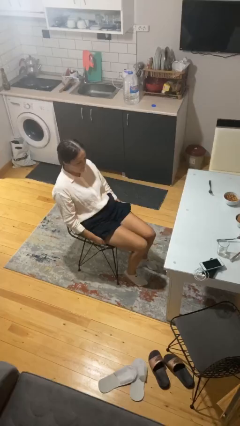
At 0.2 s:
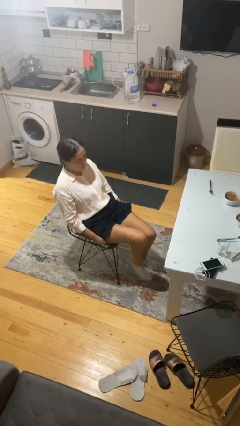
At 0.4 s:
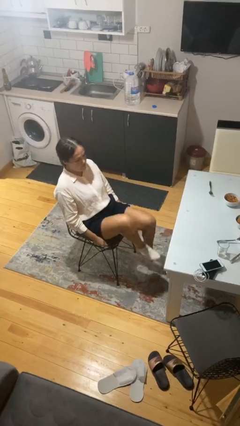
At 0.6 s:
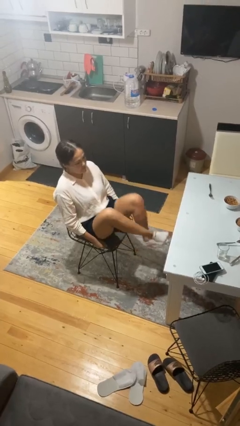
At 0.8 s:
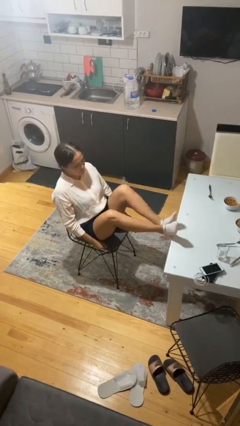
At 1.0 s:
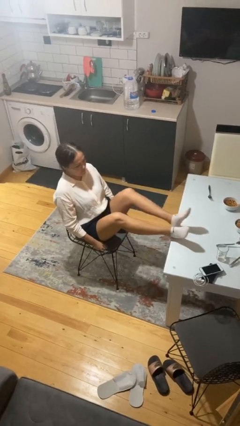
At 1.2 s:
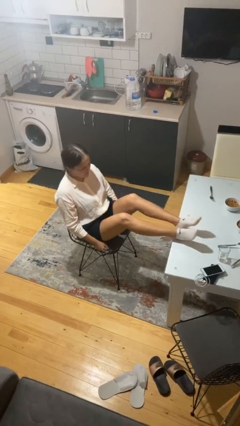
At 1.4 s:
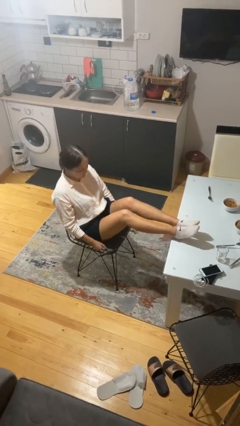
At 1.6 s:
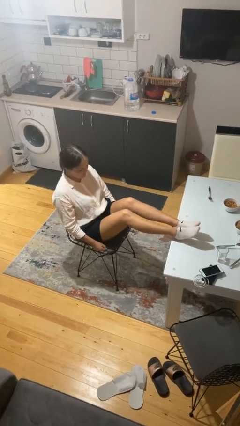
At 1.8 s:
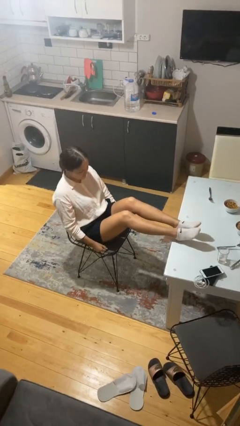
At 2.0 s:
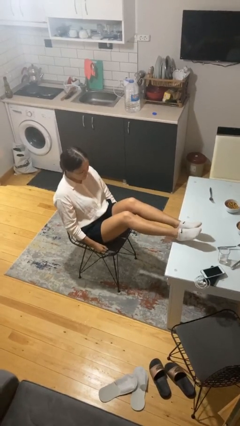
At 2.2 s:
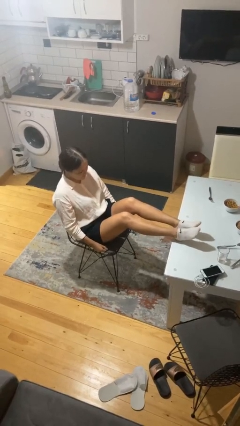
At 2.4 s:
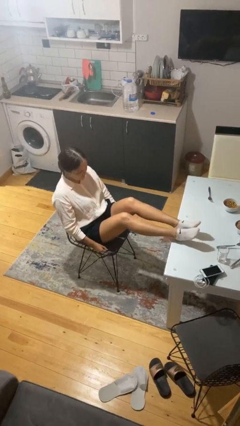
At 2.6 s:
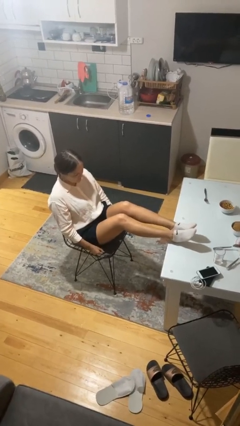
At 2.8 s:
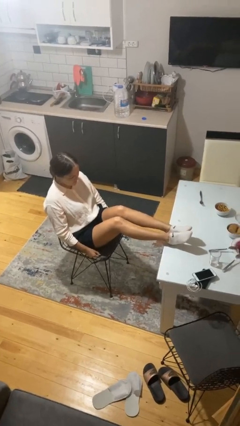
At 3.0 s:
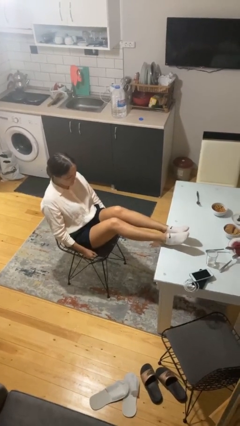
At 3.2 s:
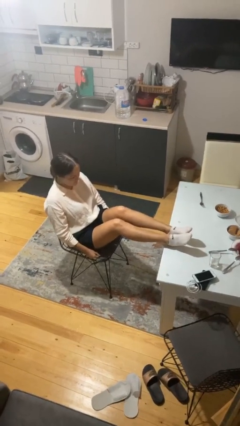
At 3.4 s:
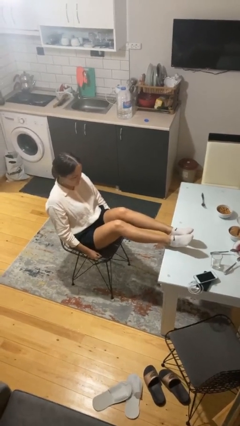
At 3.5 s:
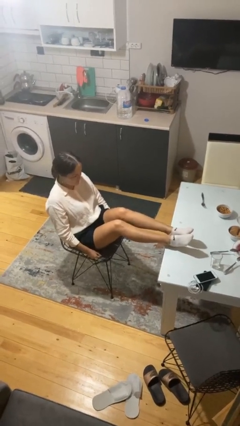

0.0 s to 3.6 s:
person puts feet up

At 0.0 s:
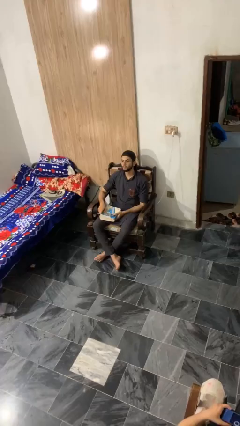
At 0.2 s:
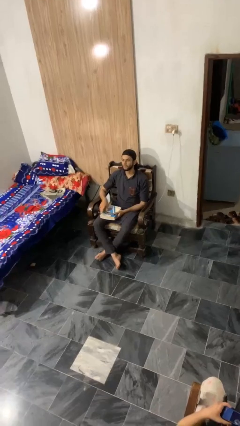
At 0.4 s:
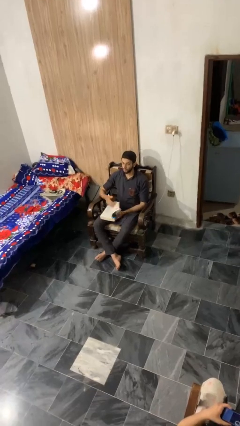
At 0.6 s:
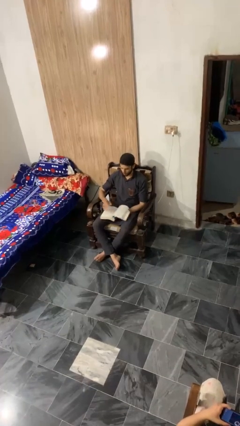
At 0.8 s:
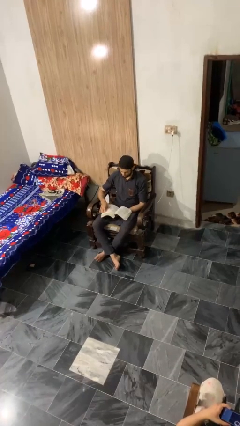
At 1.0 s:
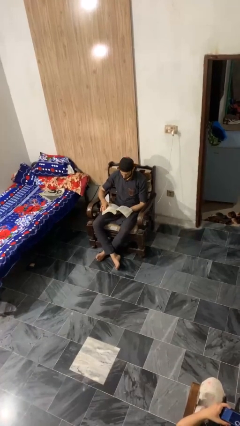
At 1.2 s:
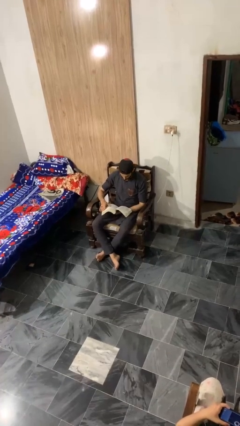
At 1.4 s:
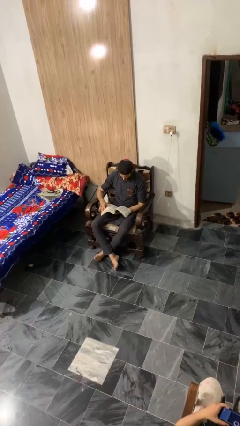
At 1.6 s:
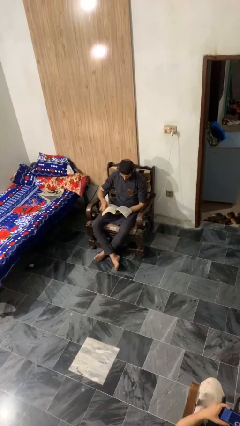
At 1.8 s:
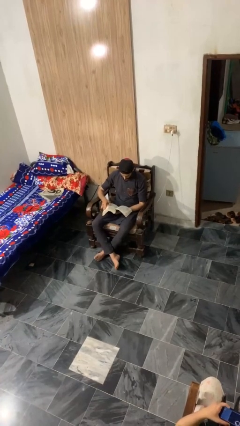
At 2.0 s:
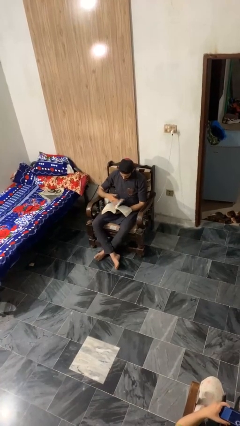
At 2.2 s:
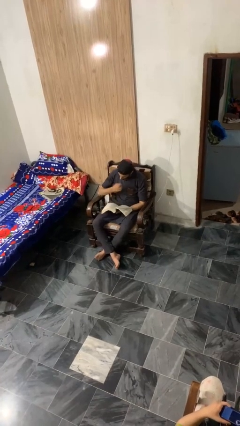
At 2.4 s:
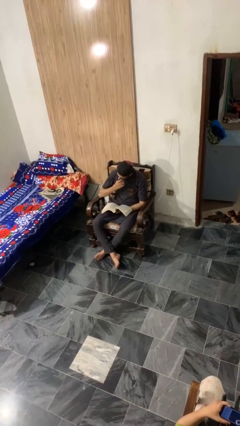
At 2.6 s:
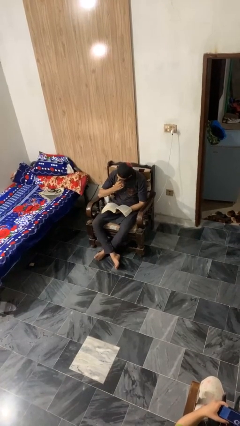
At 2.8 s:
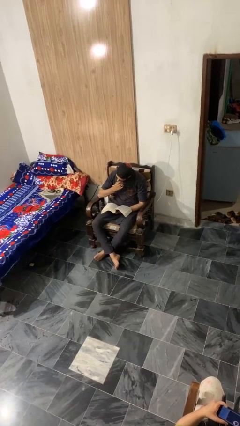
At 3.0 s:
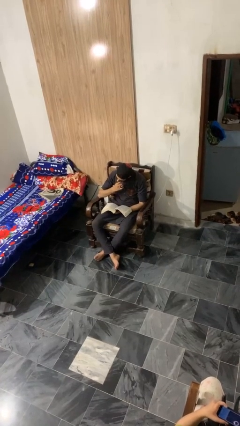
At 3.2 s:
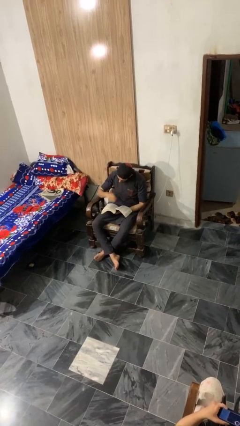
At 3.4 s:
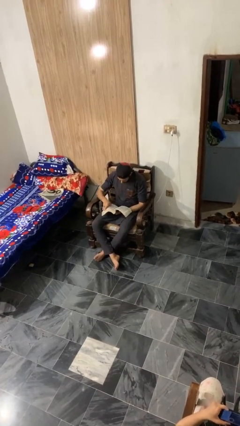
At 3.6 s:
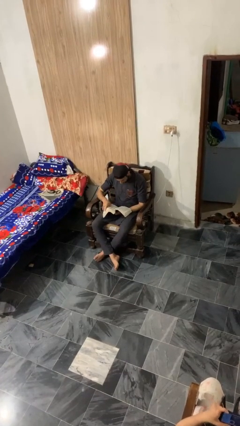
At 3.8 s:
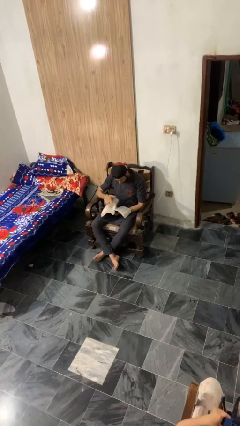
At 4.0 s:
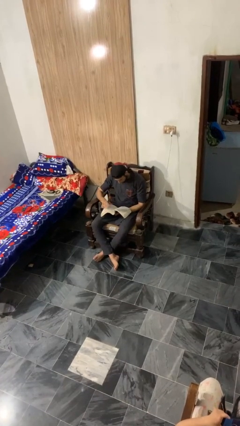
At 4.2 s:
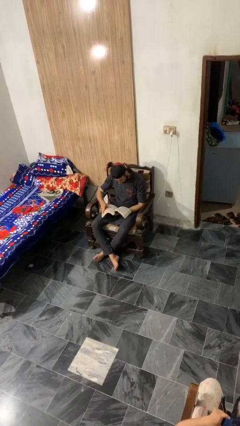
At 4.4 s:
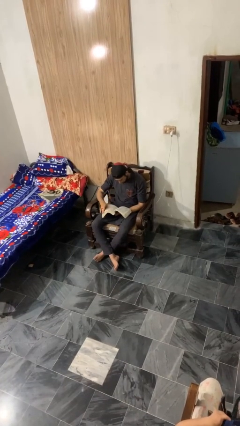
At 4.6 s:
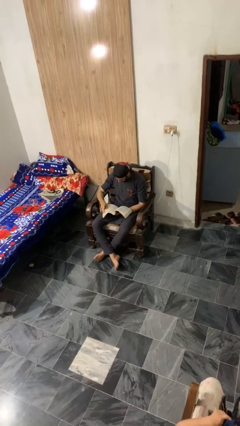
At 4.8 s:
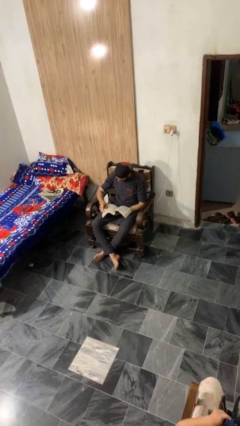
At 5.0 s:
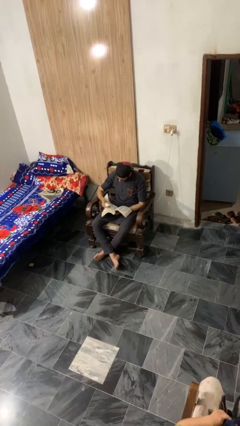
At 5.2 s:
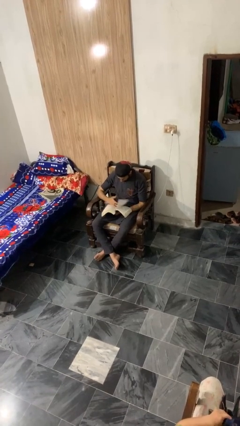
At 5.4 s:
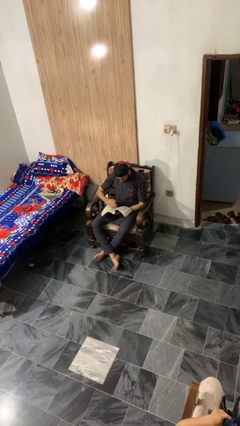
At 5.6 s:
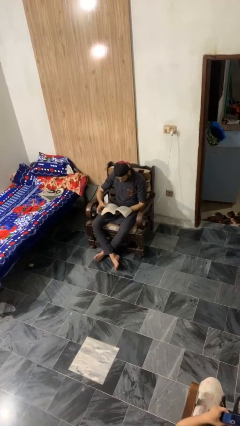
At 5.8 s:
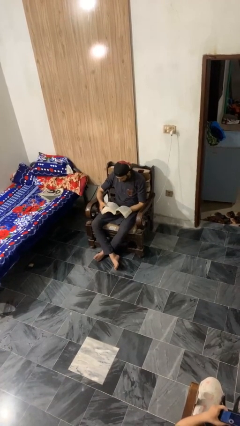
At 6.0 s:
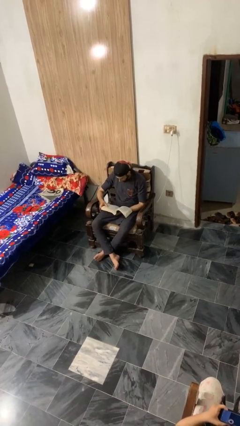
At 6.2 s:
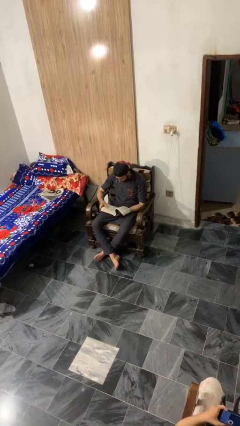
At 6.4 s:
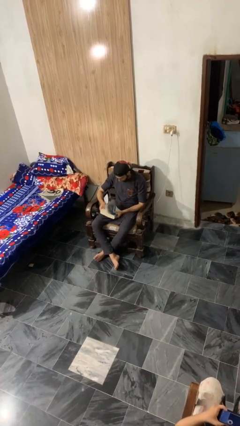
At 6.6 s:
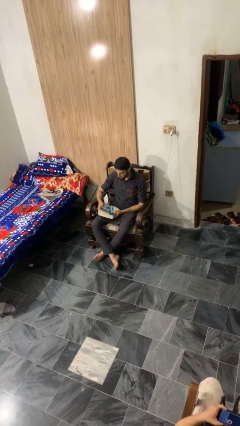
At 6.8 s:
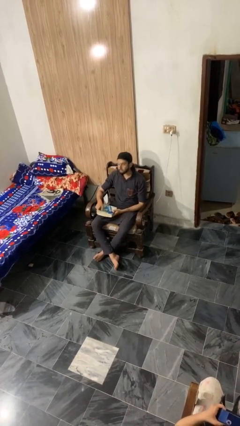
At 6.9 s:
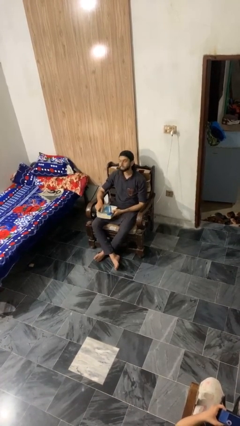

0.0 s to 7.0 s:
person reads book

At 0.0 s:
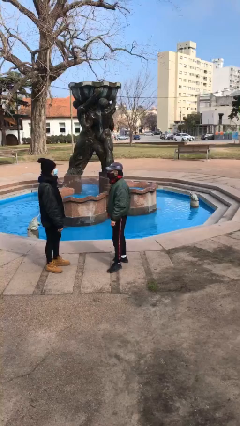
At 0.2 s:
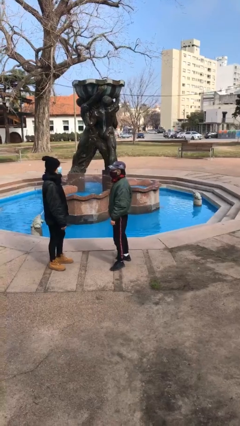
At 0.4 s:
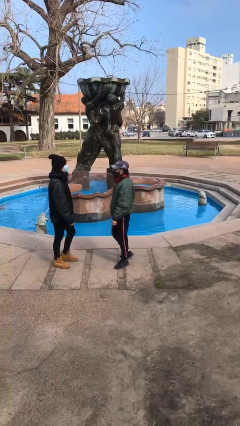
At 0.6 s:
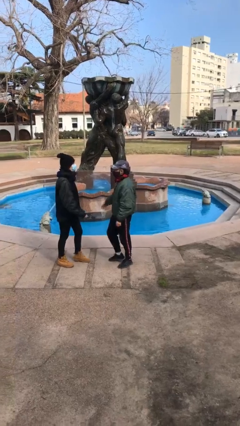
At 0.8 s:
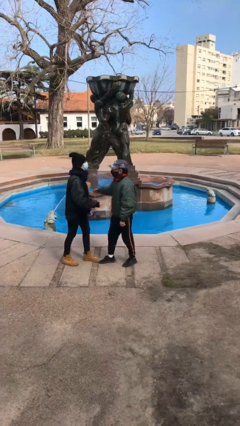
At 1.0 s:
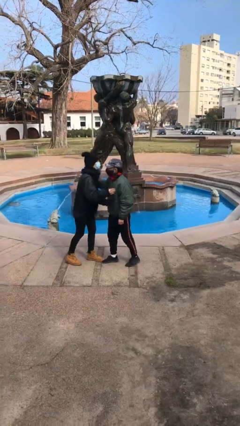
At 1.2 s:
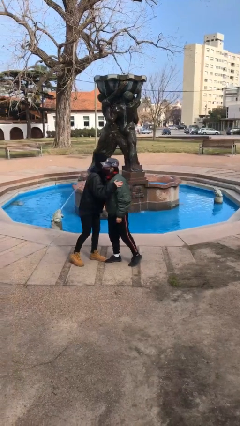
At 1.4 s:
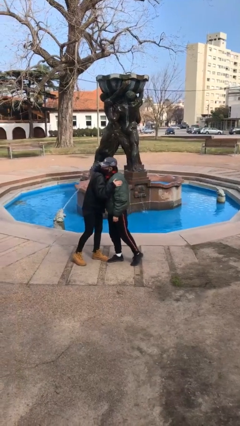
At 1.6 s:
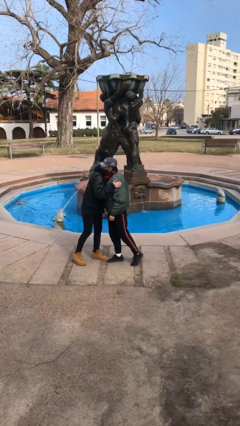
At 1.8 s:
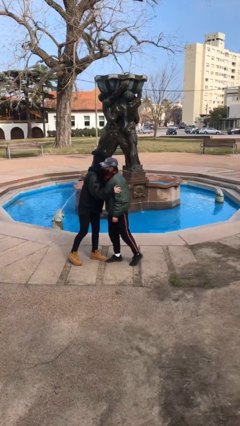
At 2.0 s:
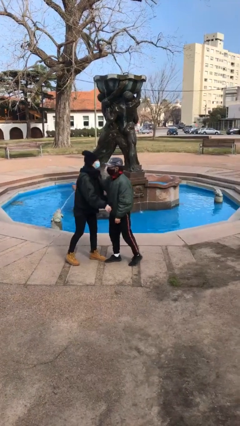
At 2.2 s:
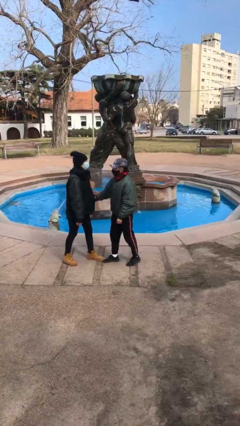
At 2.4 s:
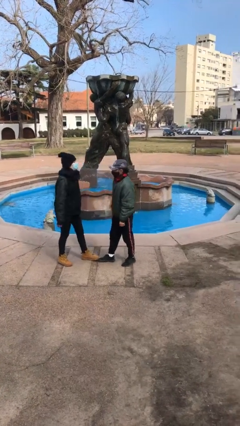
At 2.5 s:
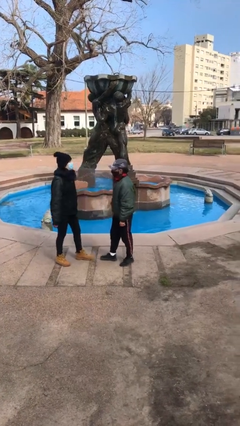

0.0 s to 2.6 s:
person kisses cheek of person

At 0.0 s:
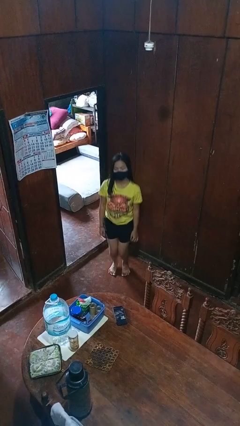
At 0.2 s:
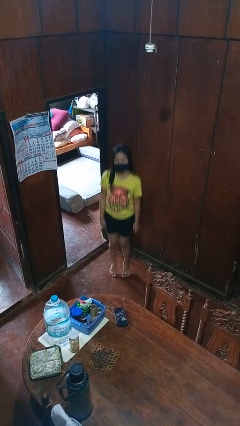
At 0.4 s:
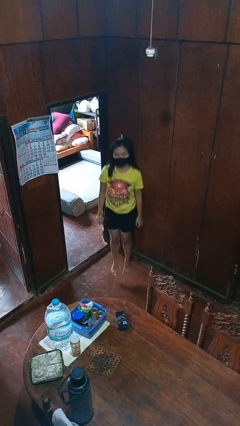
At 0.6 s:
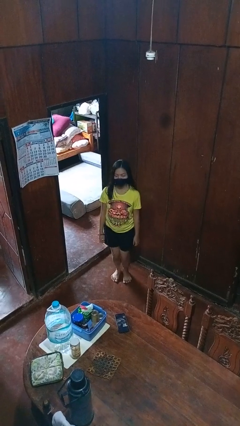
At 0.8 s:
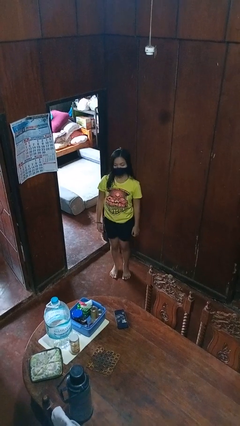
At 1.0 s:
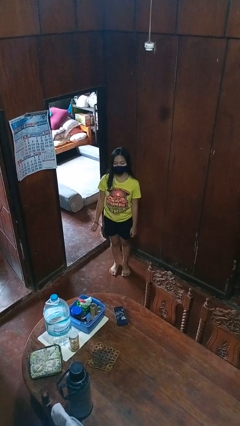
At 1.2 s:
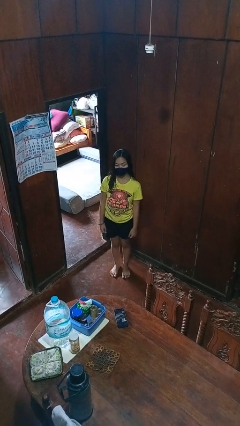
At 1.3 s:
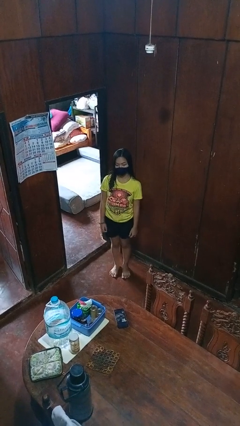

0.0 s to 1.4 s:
person jumps

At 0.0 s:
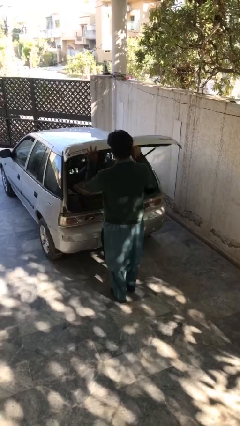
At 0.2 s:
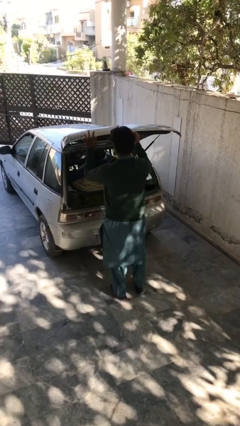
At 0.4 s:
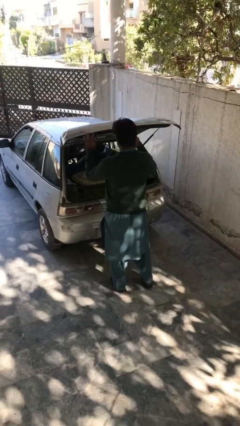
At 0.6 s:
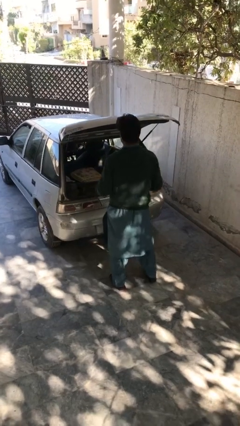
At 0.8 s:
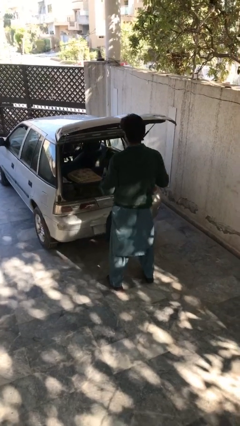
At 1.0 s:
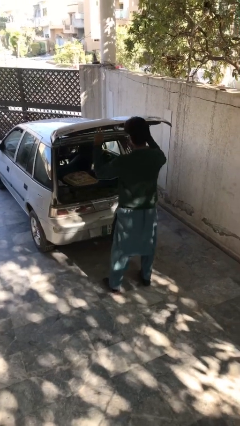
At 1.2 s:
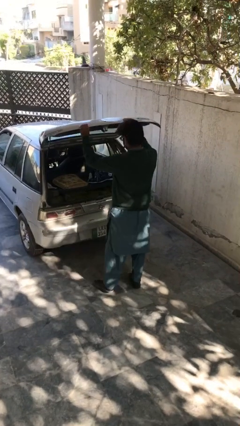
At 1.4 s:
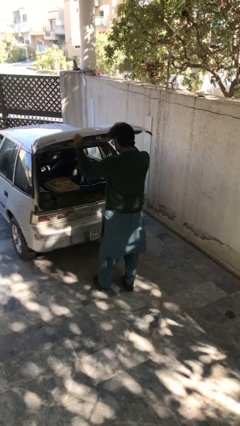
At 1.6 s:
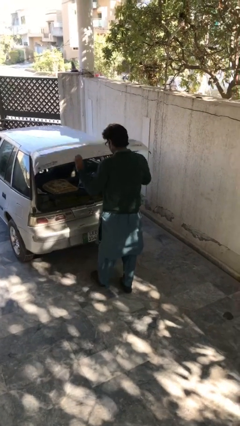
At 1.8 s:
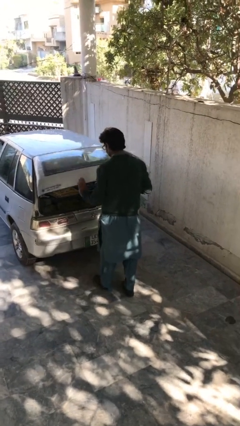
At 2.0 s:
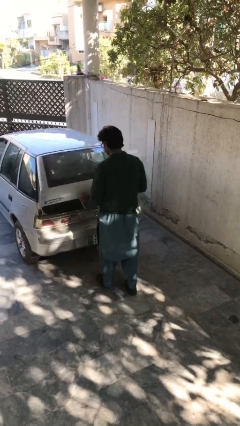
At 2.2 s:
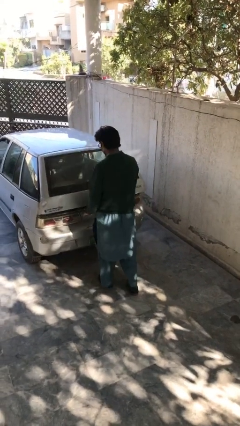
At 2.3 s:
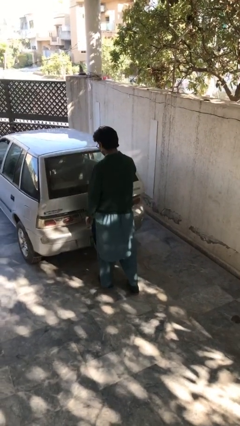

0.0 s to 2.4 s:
person closes car trunk
